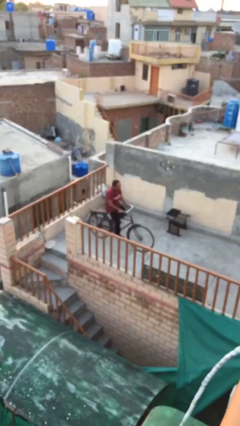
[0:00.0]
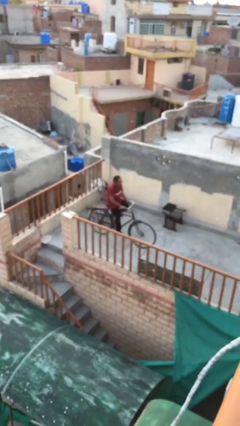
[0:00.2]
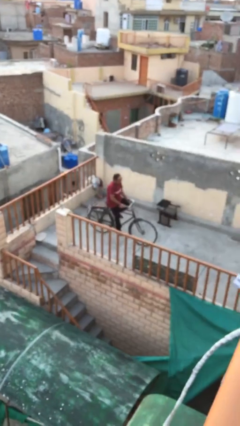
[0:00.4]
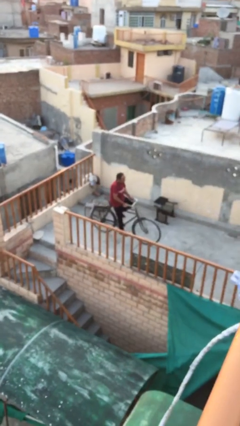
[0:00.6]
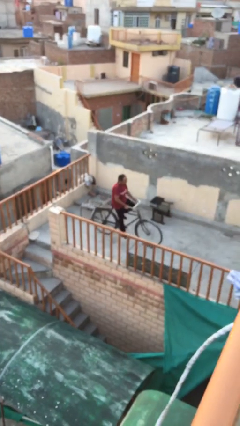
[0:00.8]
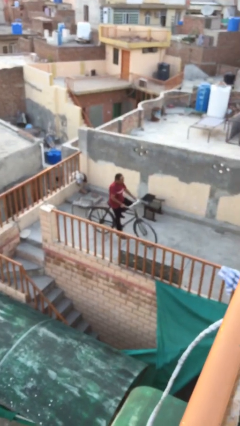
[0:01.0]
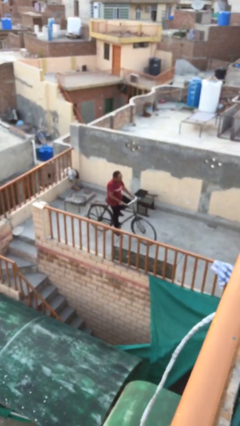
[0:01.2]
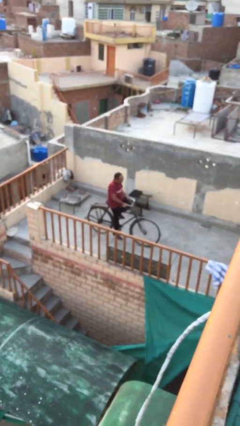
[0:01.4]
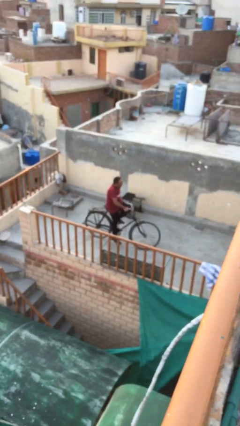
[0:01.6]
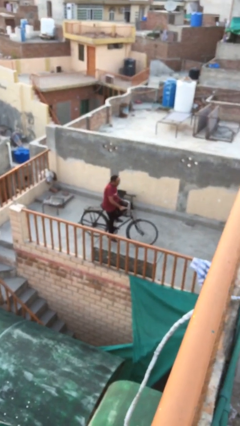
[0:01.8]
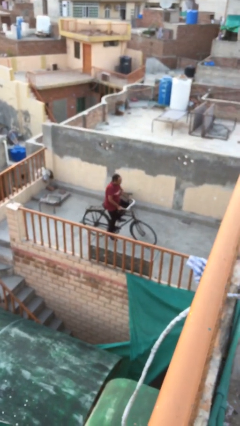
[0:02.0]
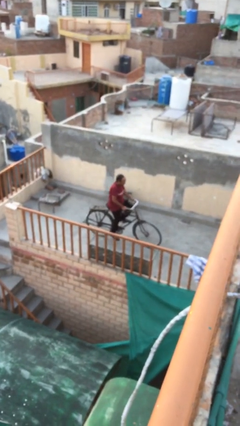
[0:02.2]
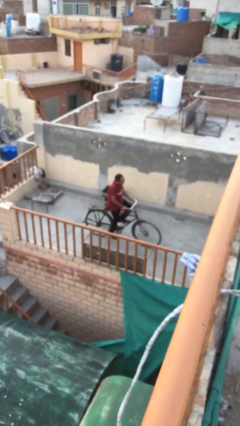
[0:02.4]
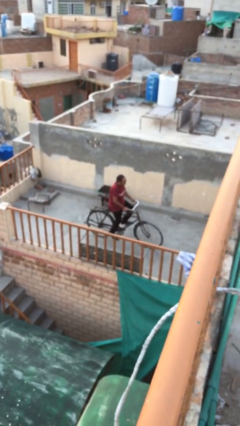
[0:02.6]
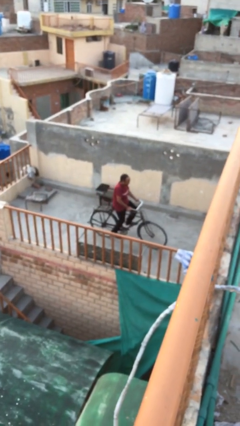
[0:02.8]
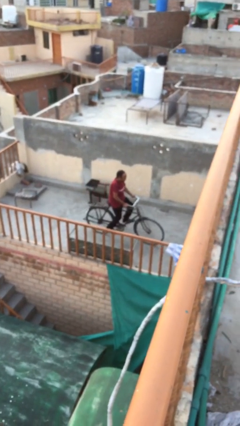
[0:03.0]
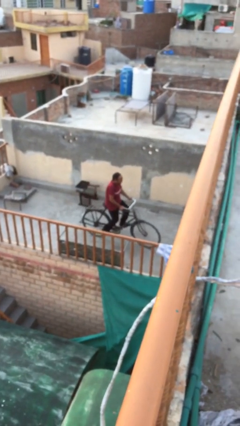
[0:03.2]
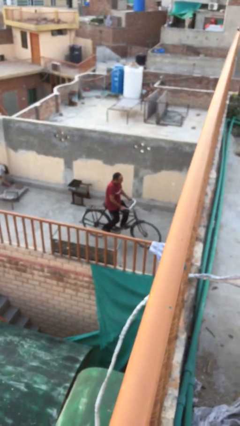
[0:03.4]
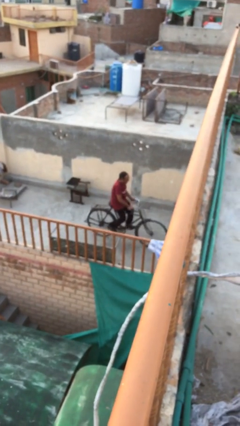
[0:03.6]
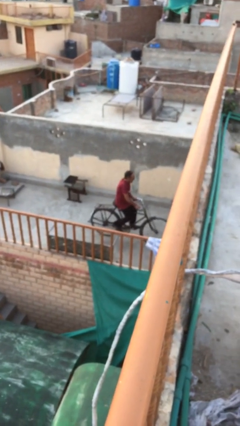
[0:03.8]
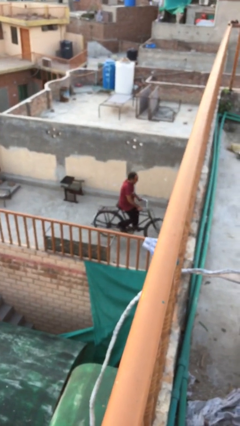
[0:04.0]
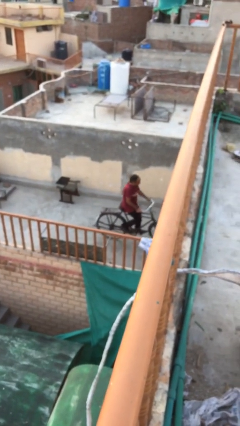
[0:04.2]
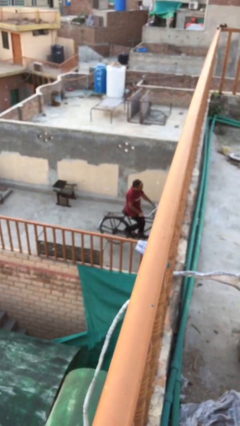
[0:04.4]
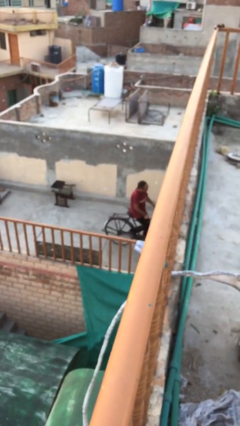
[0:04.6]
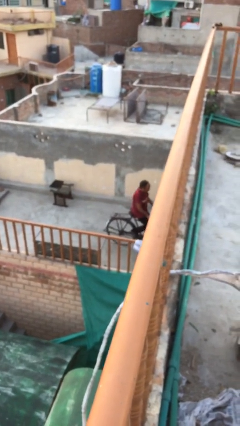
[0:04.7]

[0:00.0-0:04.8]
person rides bicycle

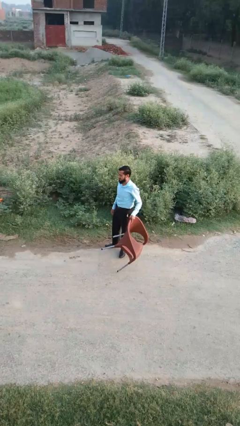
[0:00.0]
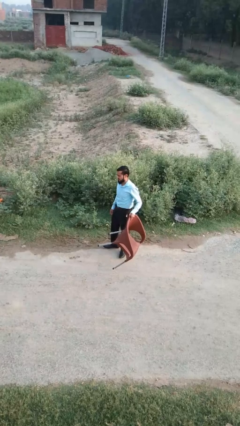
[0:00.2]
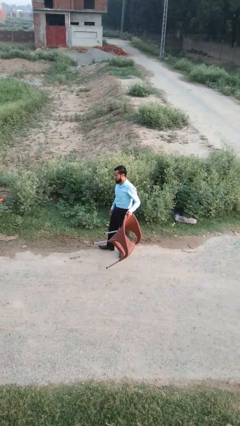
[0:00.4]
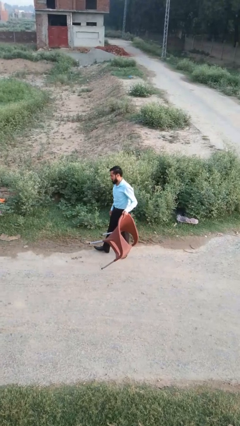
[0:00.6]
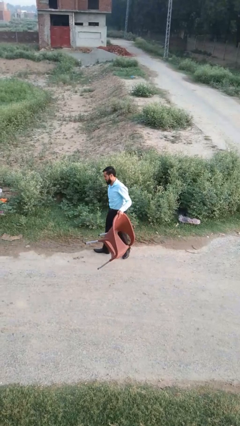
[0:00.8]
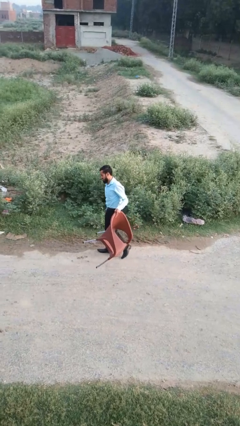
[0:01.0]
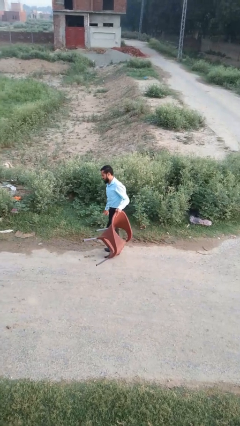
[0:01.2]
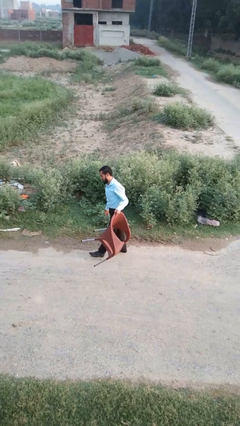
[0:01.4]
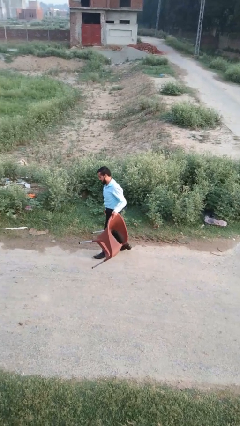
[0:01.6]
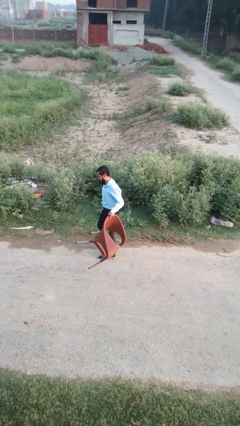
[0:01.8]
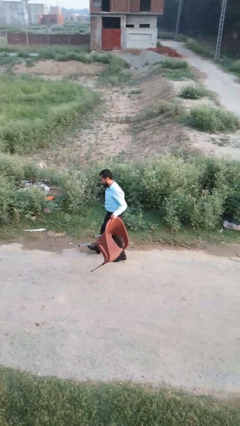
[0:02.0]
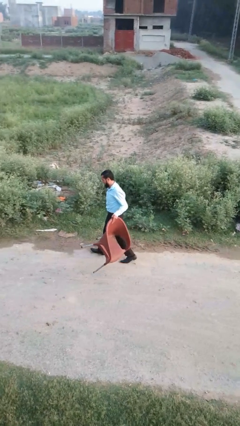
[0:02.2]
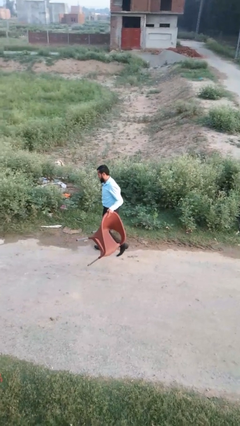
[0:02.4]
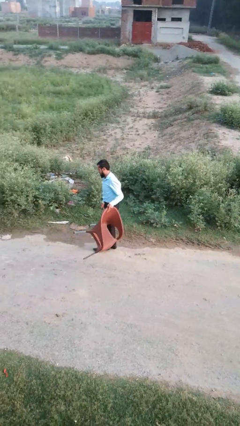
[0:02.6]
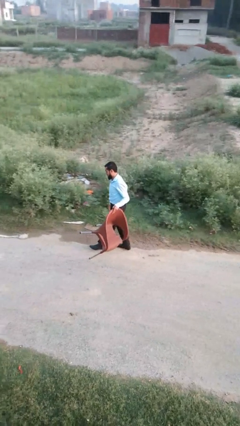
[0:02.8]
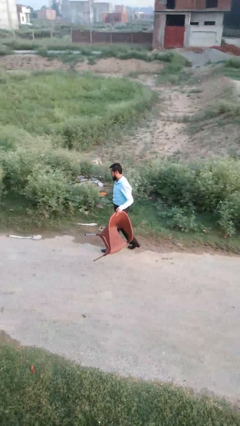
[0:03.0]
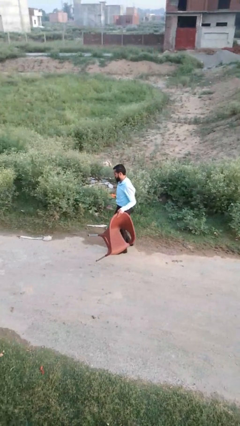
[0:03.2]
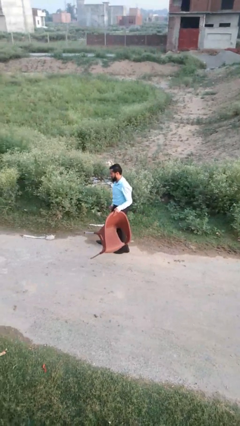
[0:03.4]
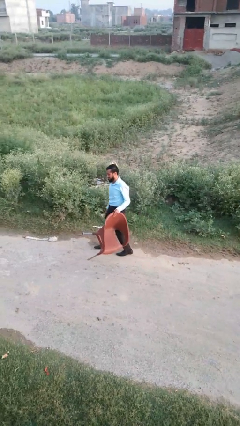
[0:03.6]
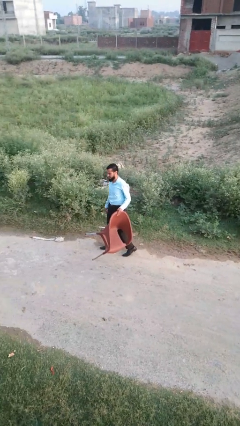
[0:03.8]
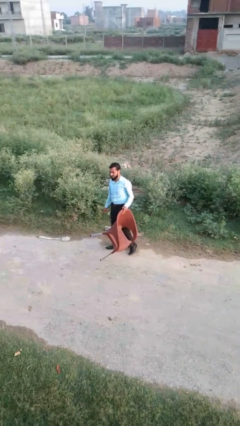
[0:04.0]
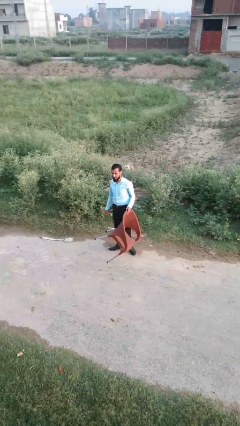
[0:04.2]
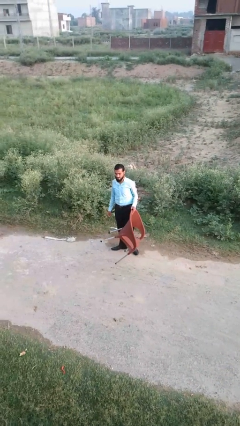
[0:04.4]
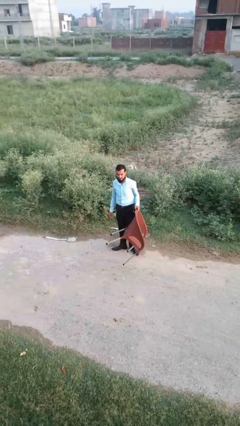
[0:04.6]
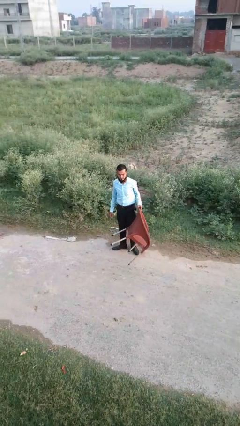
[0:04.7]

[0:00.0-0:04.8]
person carries furniture

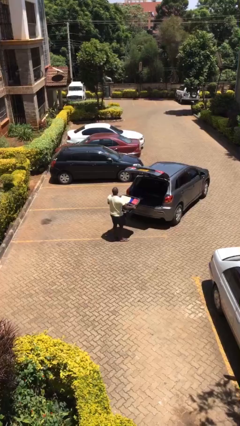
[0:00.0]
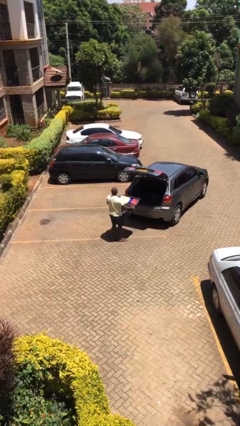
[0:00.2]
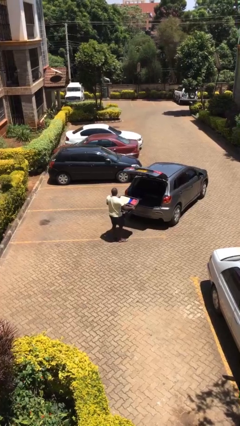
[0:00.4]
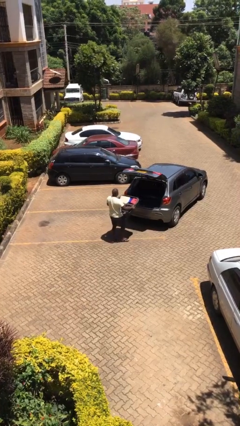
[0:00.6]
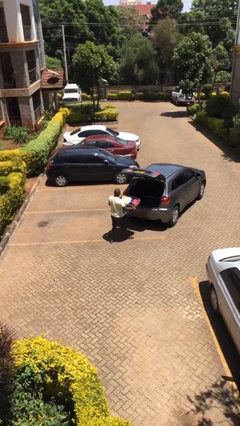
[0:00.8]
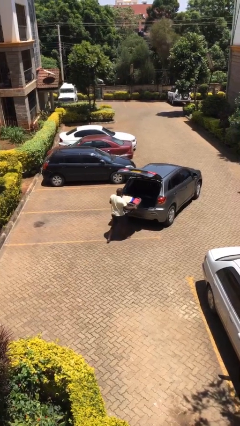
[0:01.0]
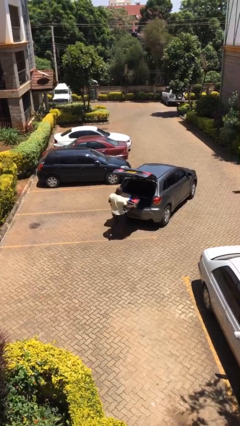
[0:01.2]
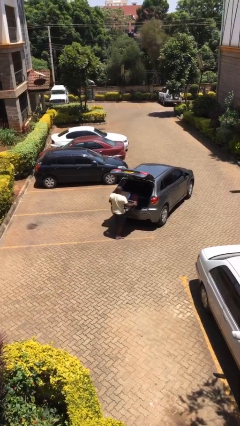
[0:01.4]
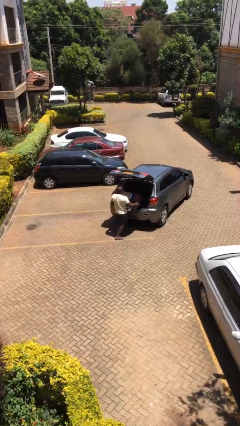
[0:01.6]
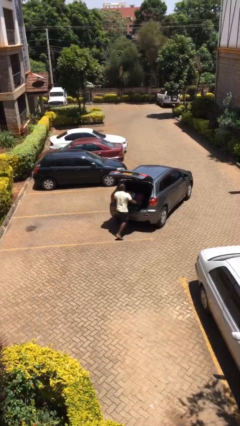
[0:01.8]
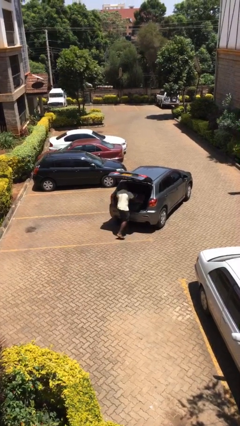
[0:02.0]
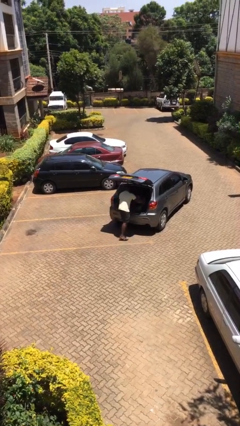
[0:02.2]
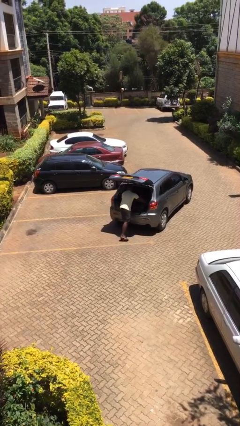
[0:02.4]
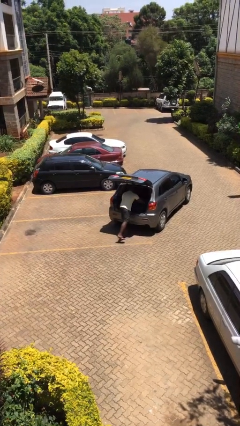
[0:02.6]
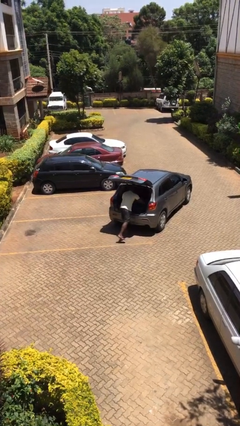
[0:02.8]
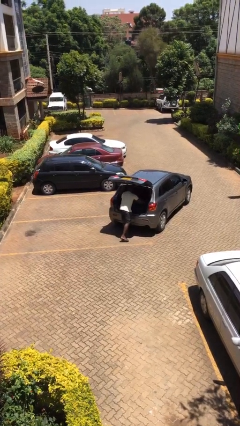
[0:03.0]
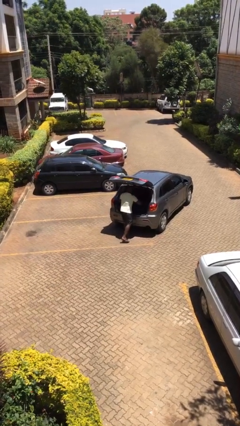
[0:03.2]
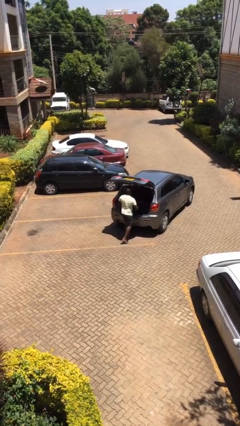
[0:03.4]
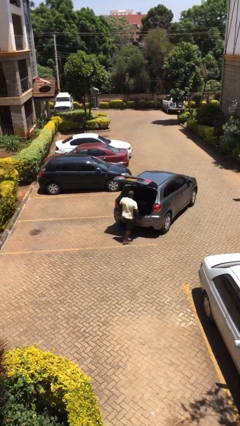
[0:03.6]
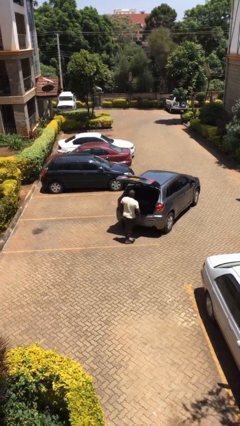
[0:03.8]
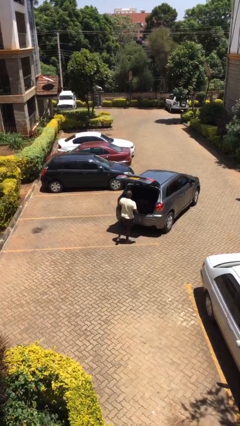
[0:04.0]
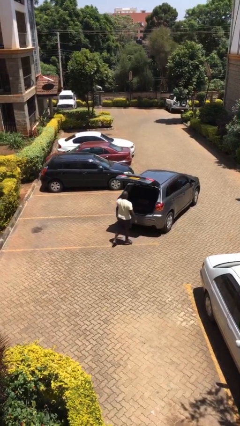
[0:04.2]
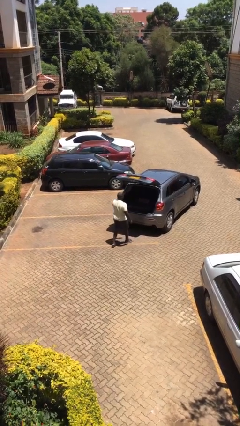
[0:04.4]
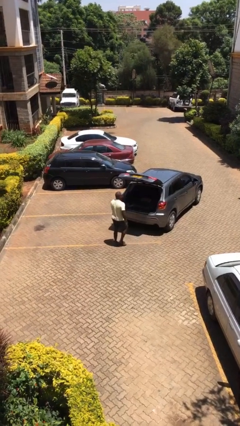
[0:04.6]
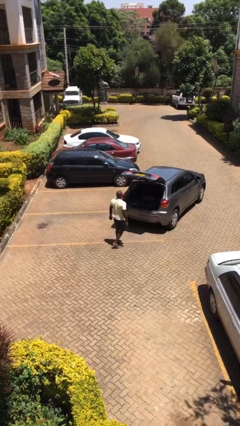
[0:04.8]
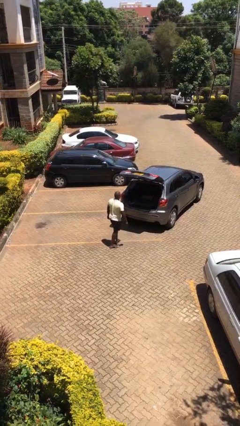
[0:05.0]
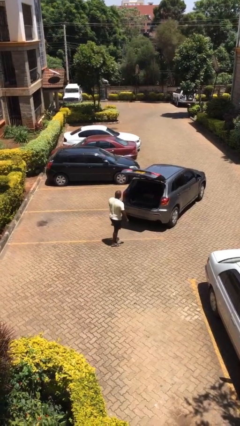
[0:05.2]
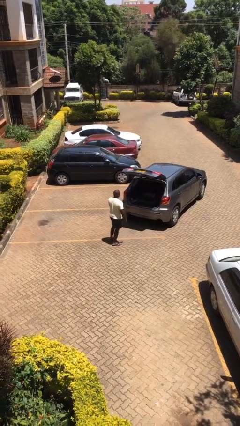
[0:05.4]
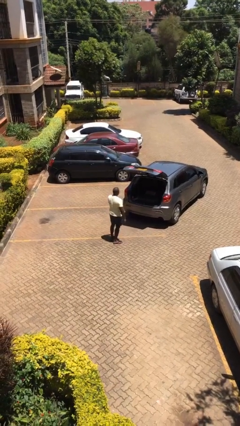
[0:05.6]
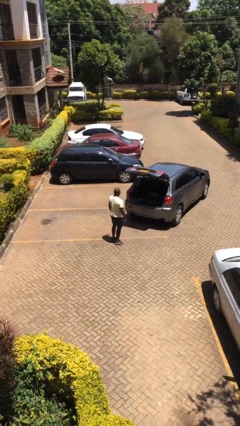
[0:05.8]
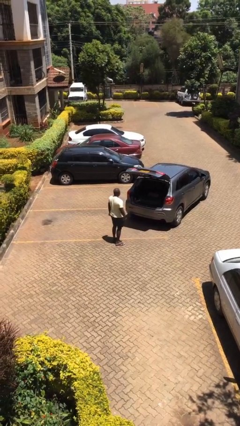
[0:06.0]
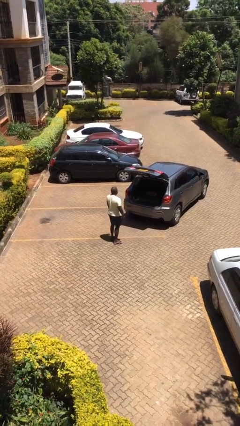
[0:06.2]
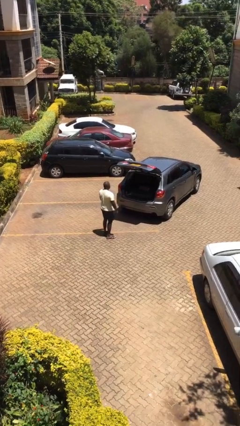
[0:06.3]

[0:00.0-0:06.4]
person loads car

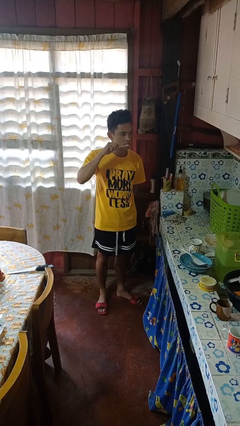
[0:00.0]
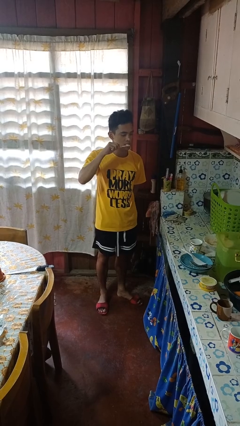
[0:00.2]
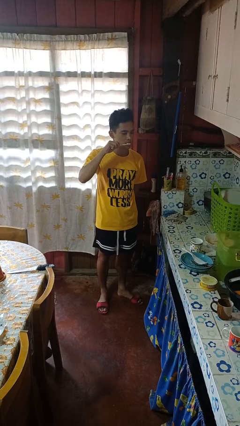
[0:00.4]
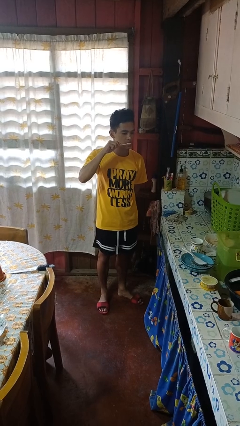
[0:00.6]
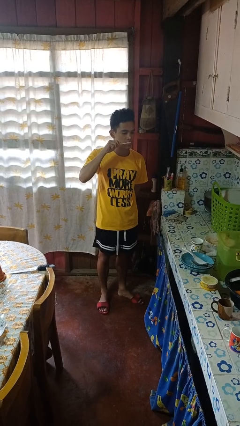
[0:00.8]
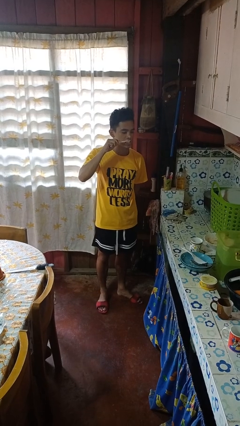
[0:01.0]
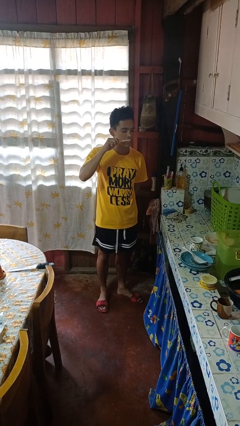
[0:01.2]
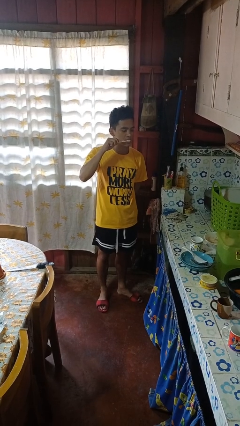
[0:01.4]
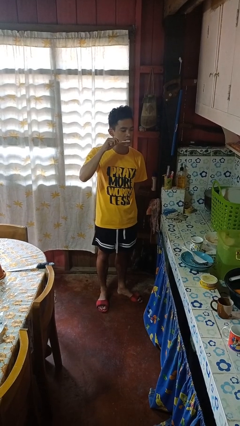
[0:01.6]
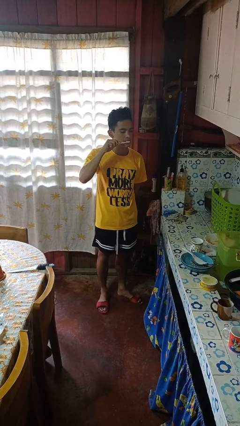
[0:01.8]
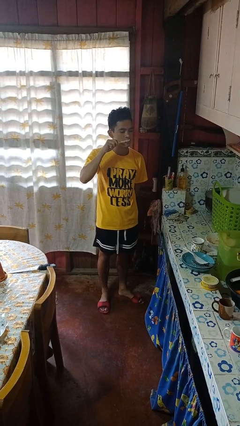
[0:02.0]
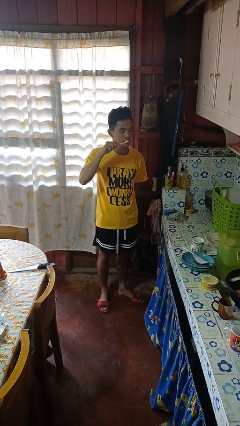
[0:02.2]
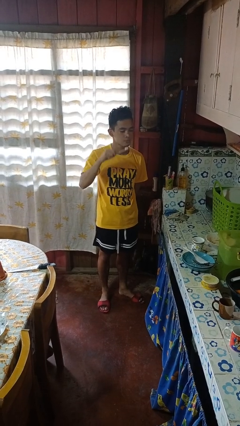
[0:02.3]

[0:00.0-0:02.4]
person brushes teeth
